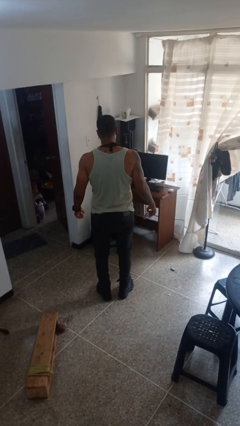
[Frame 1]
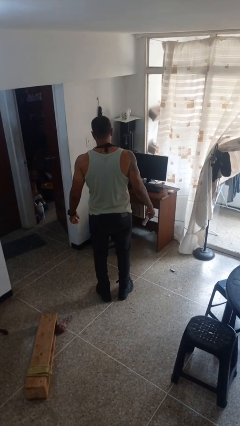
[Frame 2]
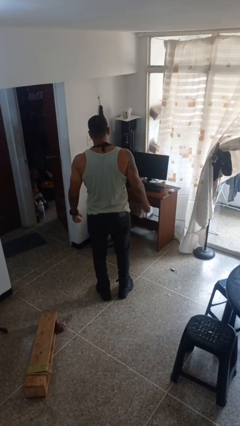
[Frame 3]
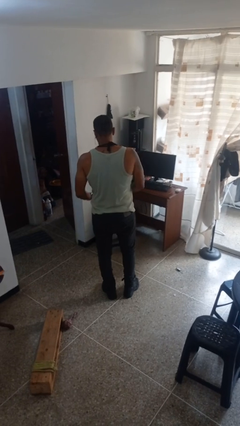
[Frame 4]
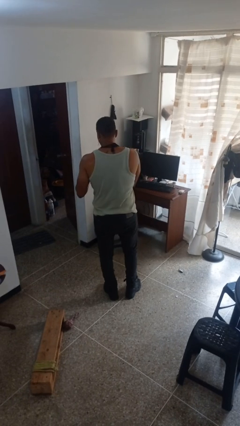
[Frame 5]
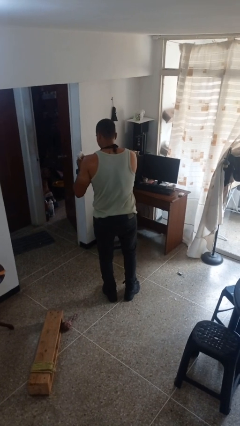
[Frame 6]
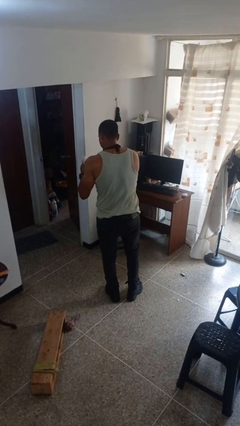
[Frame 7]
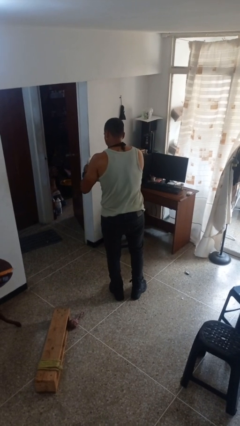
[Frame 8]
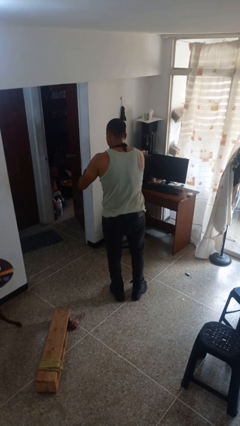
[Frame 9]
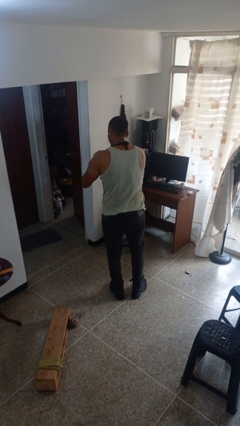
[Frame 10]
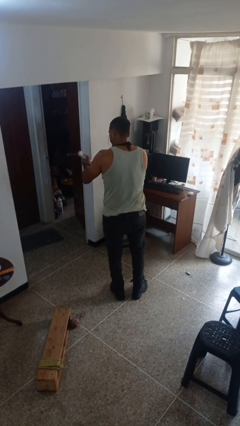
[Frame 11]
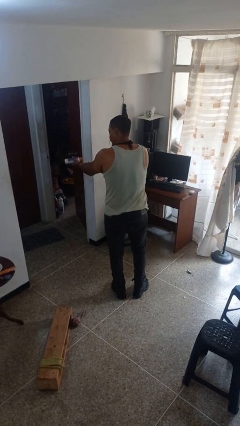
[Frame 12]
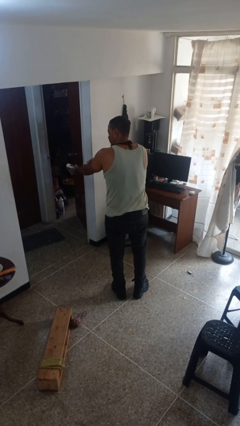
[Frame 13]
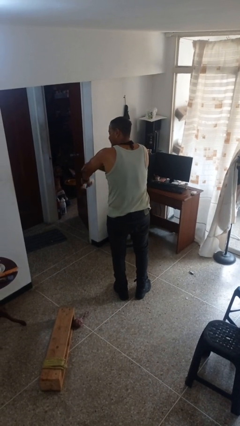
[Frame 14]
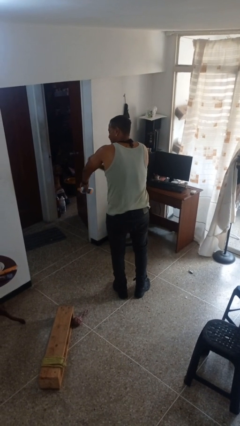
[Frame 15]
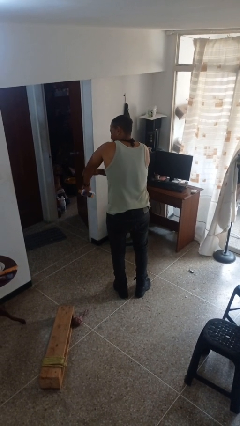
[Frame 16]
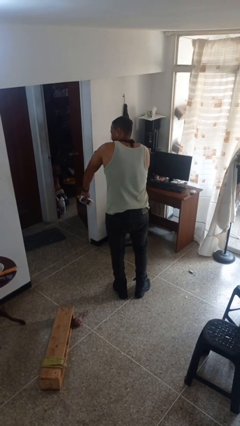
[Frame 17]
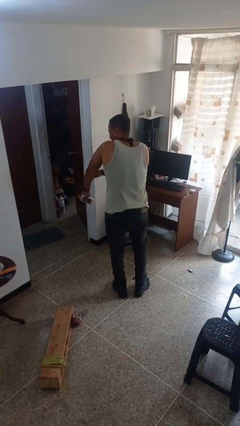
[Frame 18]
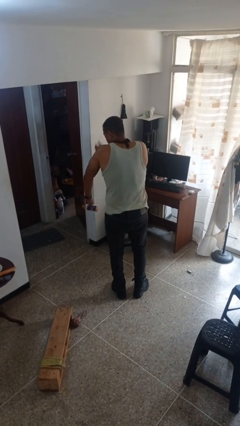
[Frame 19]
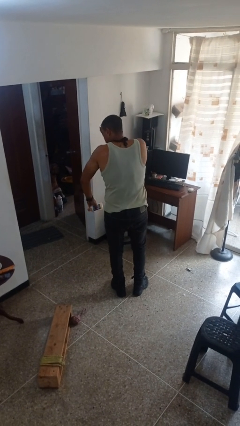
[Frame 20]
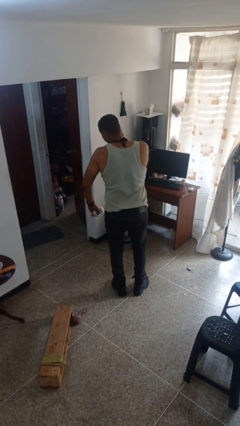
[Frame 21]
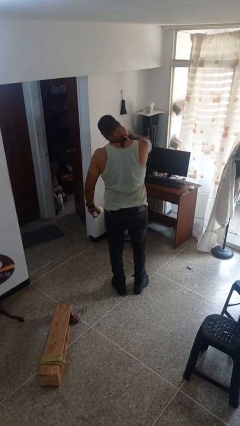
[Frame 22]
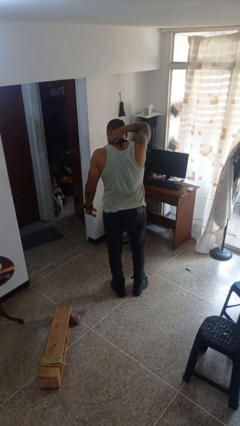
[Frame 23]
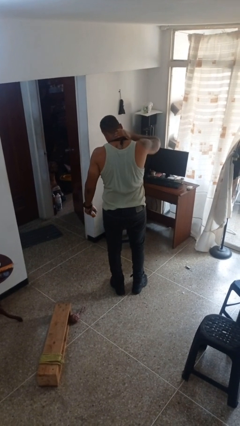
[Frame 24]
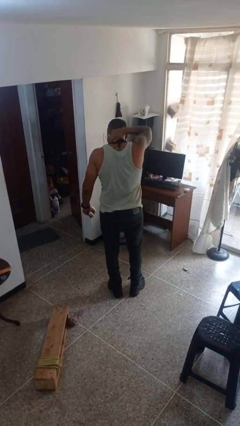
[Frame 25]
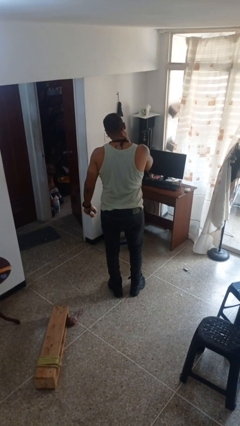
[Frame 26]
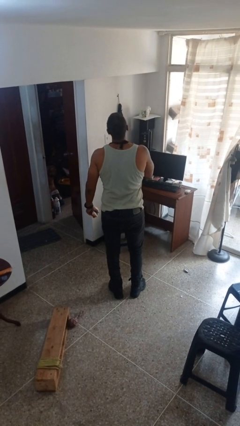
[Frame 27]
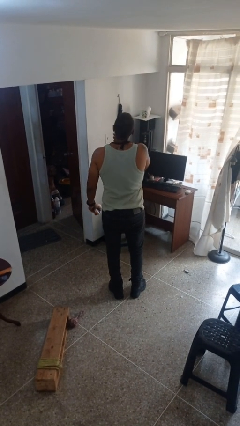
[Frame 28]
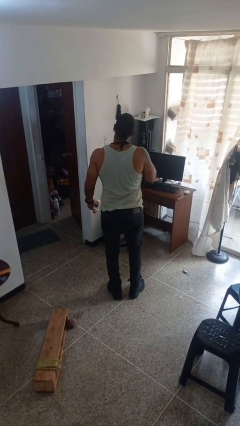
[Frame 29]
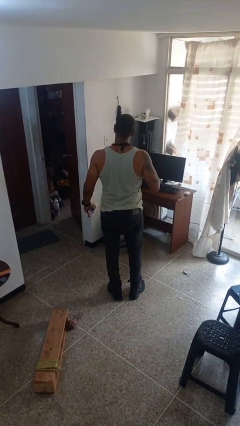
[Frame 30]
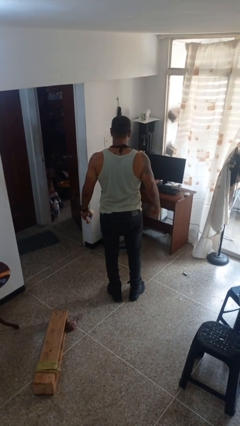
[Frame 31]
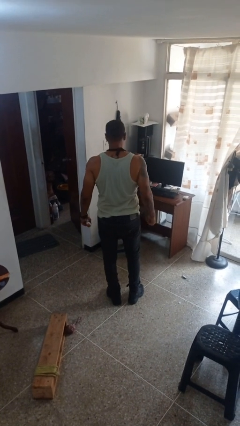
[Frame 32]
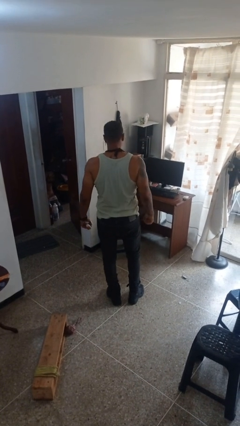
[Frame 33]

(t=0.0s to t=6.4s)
person applies sunscreen

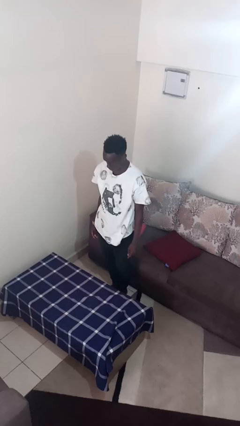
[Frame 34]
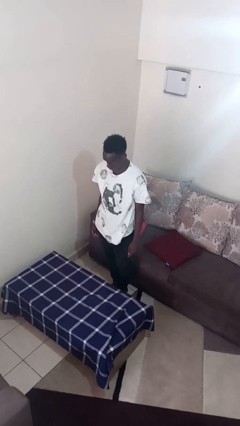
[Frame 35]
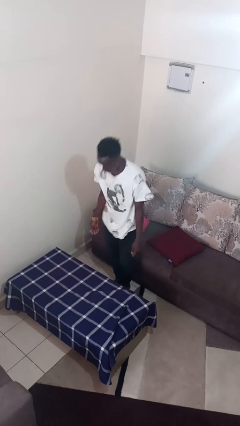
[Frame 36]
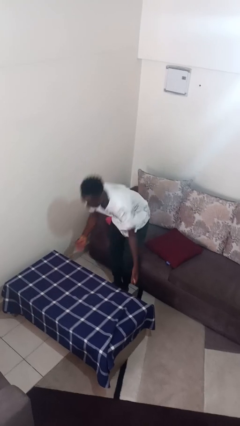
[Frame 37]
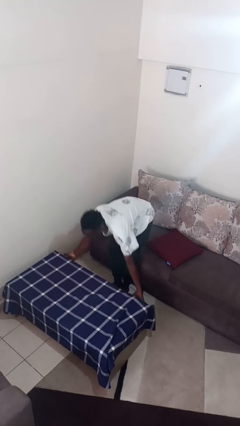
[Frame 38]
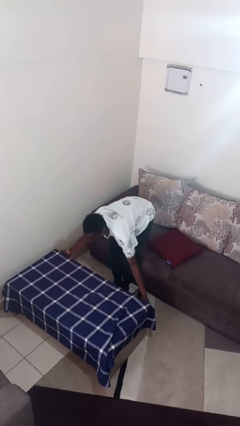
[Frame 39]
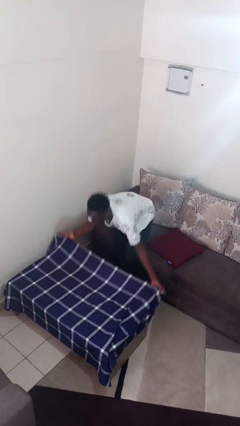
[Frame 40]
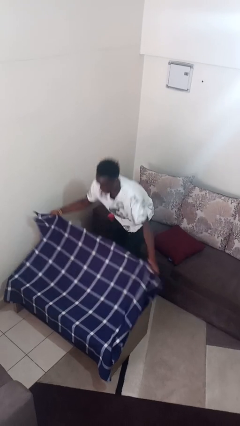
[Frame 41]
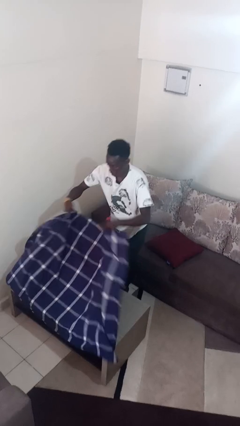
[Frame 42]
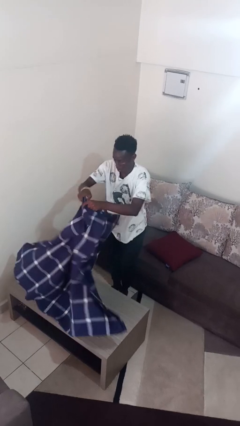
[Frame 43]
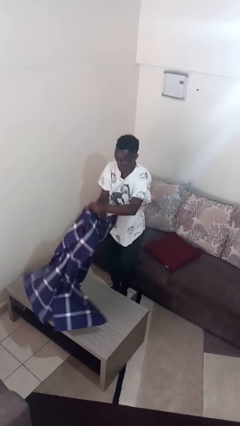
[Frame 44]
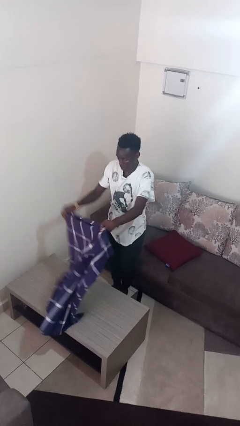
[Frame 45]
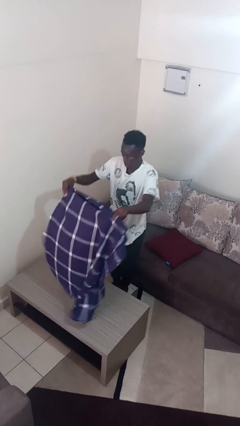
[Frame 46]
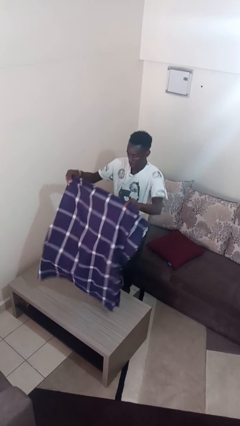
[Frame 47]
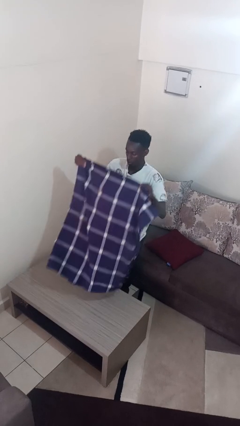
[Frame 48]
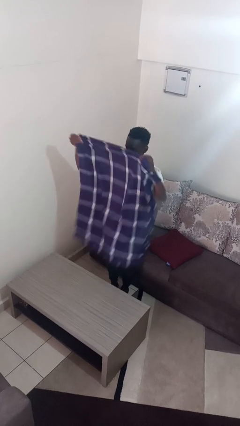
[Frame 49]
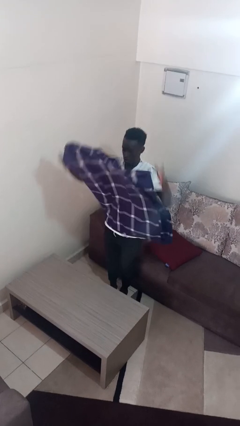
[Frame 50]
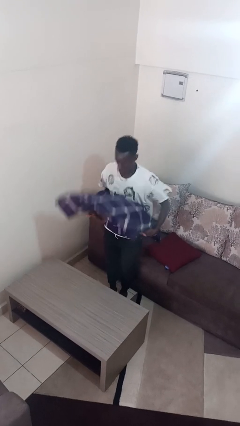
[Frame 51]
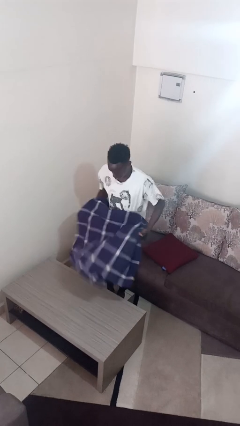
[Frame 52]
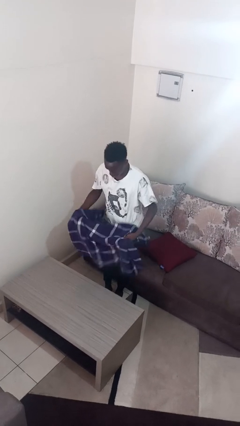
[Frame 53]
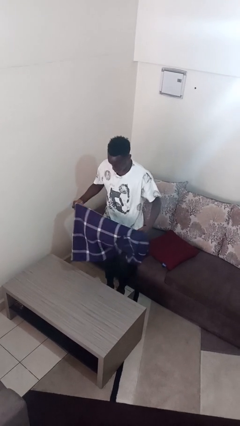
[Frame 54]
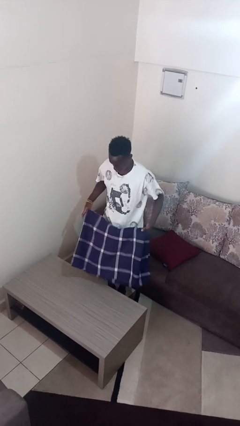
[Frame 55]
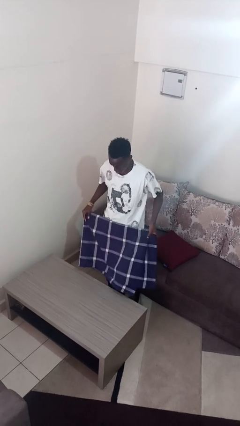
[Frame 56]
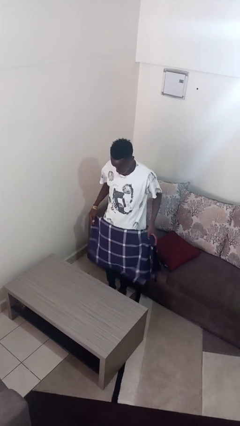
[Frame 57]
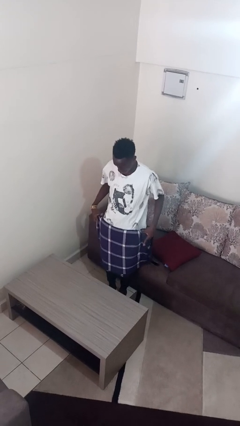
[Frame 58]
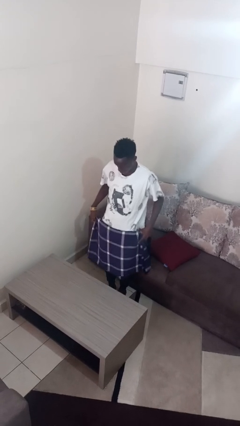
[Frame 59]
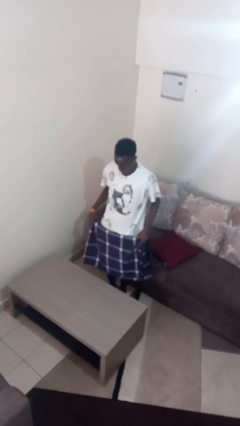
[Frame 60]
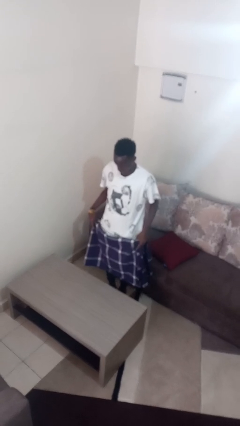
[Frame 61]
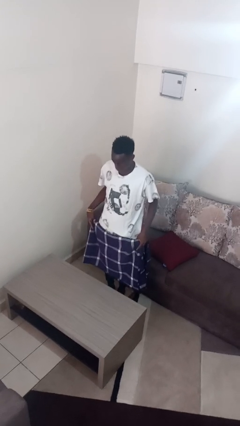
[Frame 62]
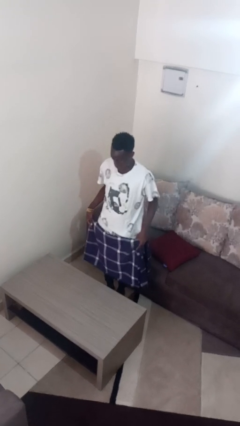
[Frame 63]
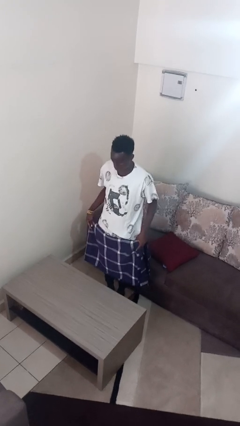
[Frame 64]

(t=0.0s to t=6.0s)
person folds tablecloth

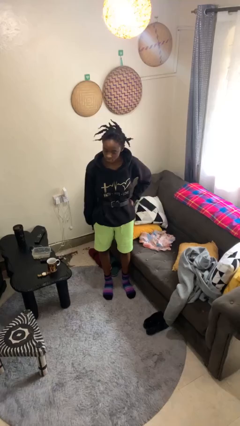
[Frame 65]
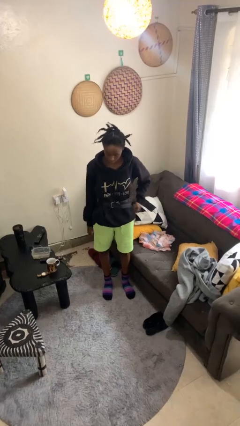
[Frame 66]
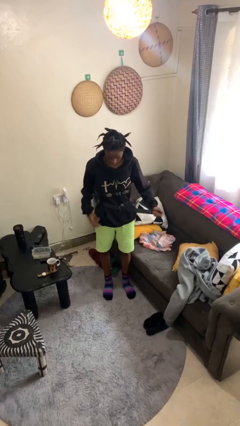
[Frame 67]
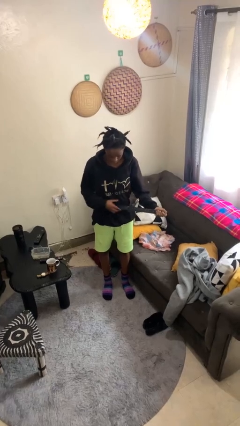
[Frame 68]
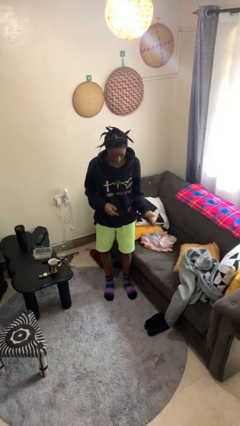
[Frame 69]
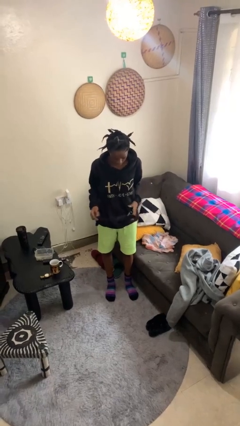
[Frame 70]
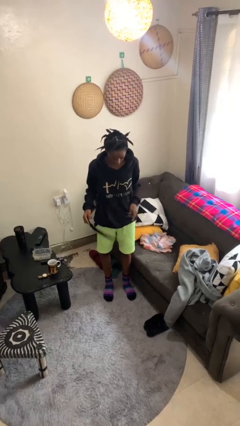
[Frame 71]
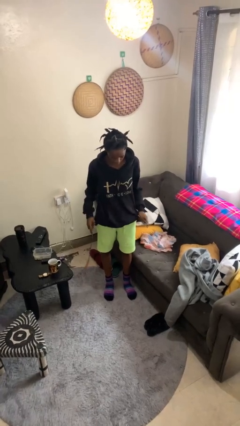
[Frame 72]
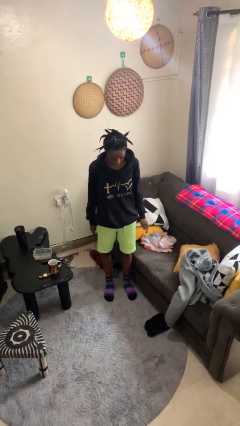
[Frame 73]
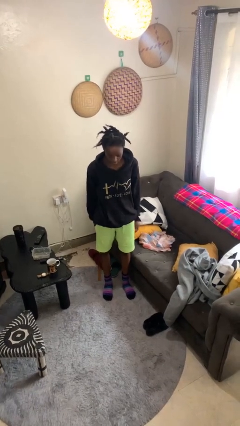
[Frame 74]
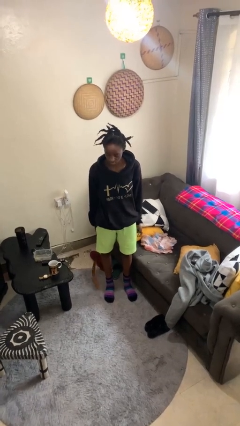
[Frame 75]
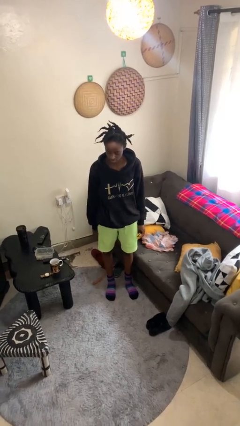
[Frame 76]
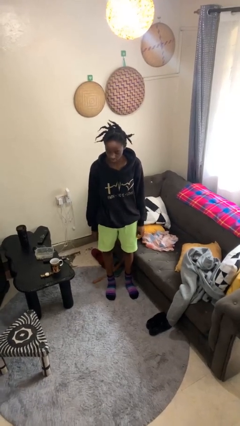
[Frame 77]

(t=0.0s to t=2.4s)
person takes off belt

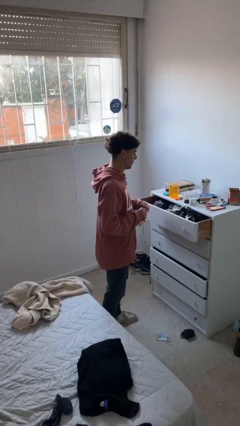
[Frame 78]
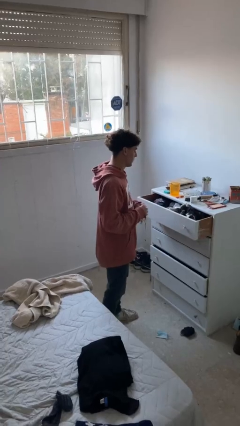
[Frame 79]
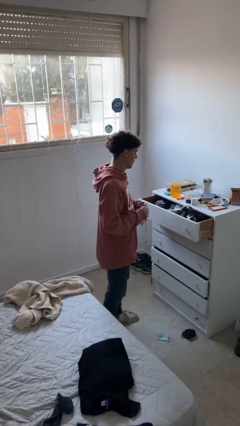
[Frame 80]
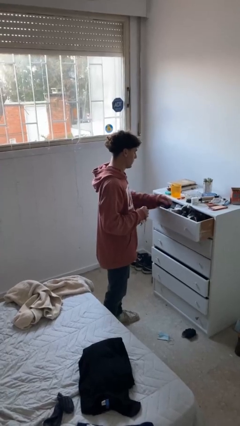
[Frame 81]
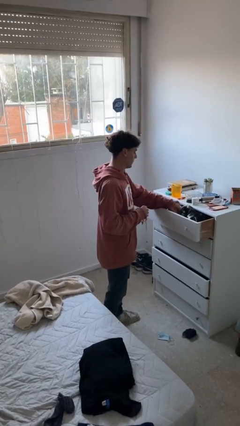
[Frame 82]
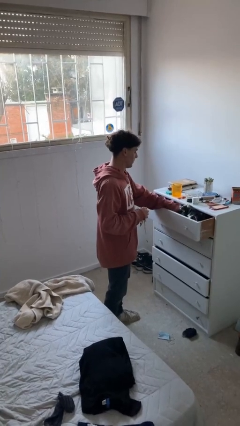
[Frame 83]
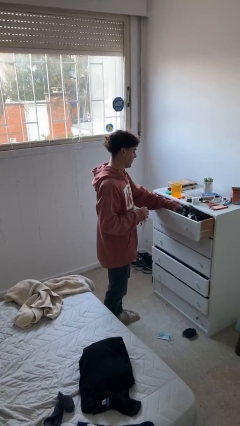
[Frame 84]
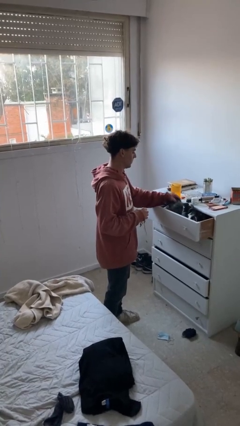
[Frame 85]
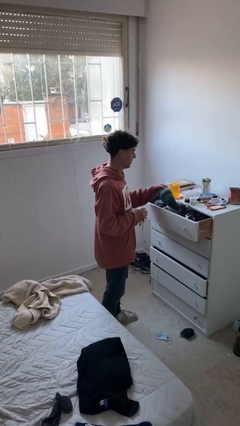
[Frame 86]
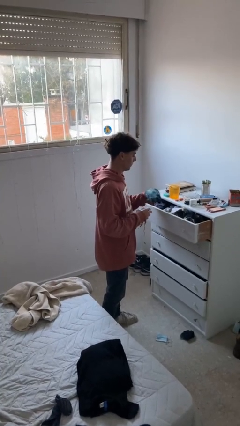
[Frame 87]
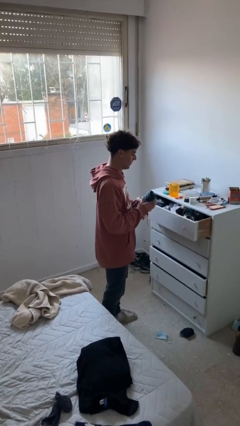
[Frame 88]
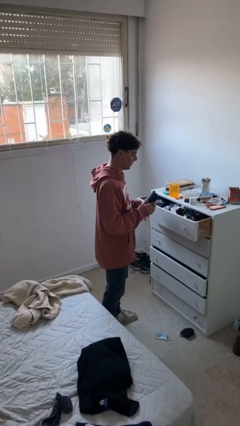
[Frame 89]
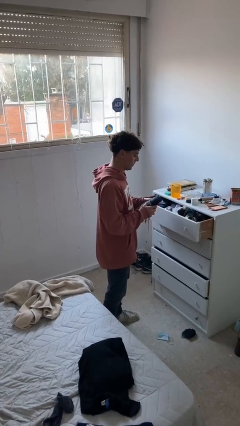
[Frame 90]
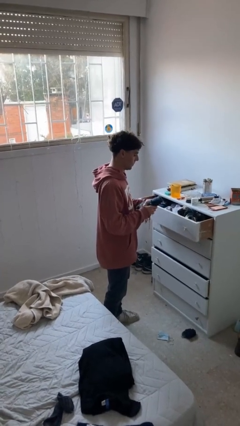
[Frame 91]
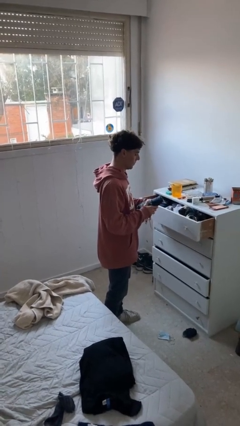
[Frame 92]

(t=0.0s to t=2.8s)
person takes clothes from dresser

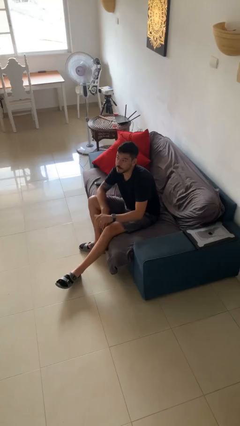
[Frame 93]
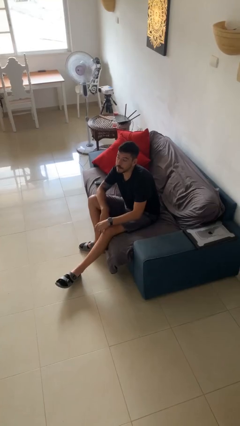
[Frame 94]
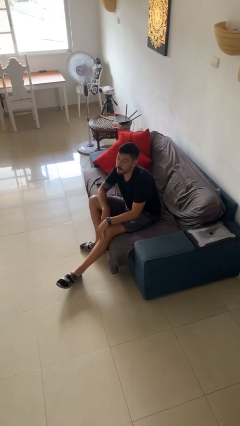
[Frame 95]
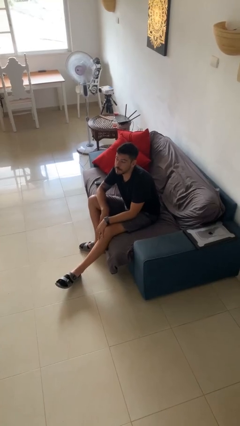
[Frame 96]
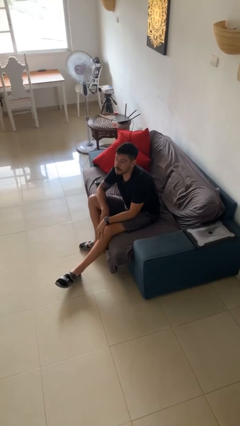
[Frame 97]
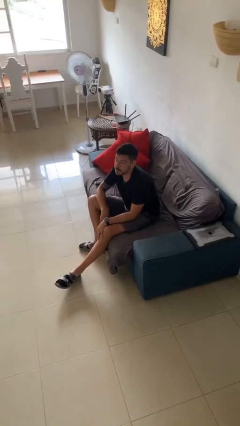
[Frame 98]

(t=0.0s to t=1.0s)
person gestures lower hand
